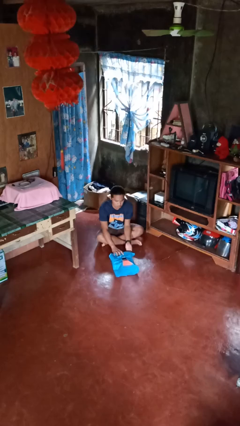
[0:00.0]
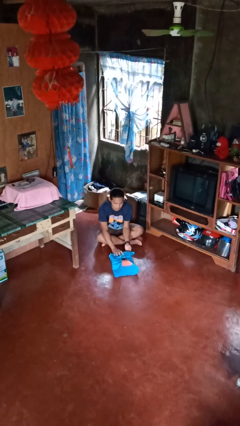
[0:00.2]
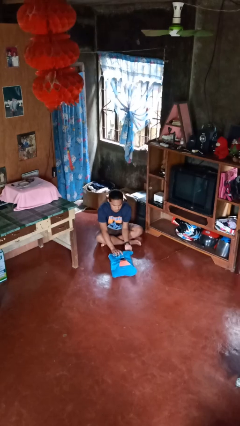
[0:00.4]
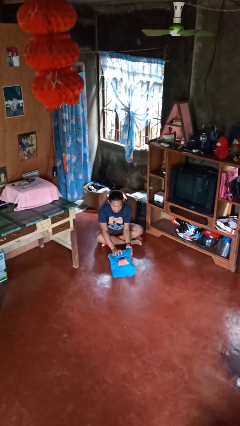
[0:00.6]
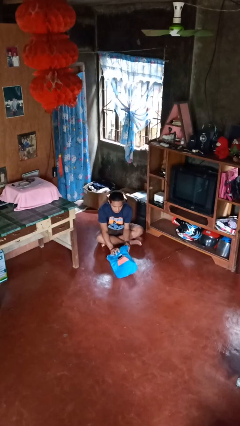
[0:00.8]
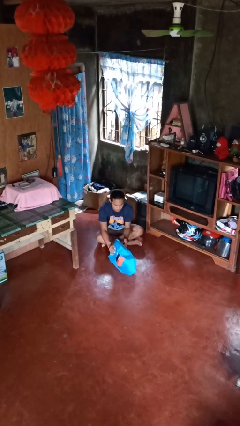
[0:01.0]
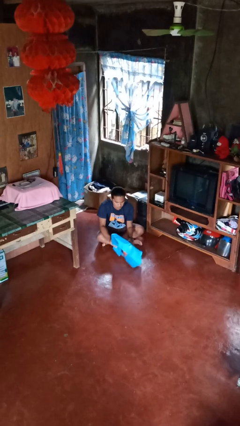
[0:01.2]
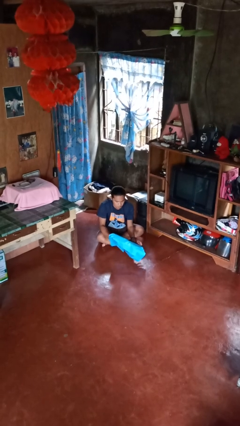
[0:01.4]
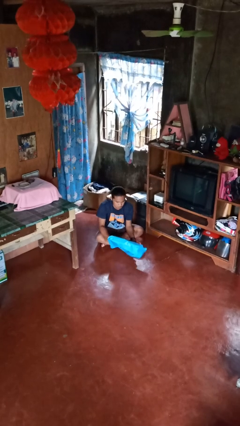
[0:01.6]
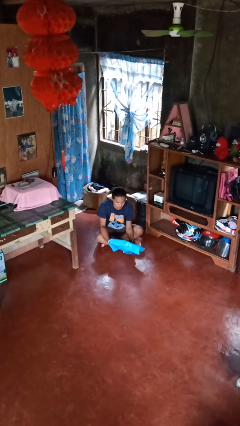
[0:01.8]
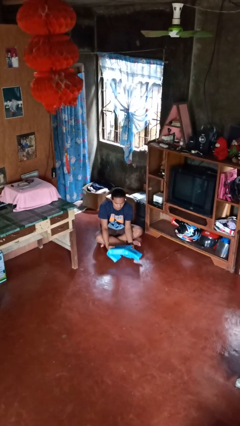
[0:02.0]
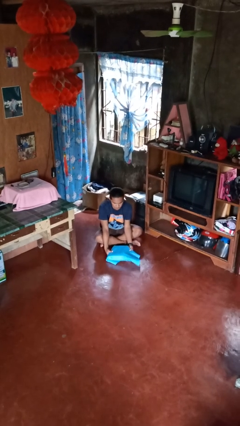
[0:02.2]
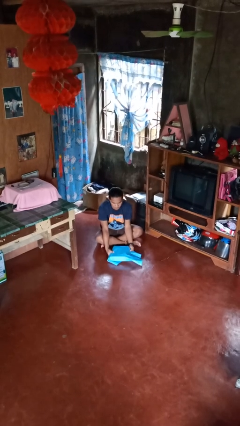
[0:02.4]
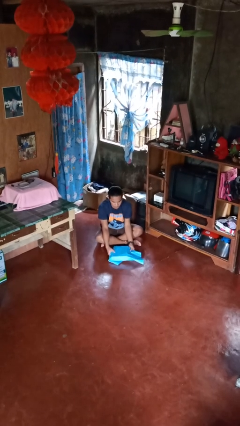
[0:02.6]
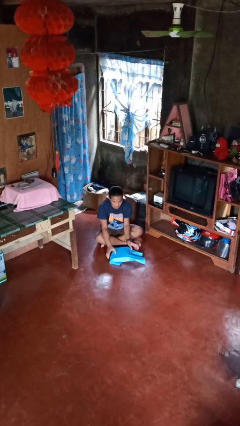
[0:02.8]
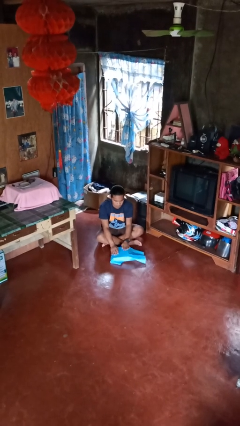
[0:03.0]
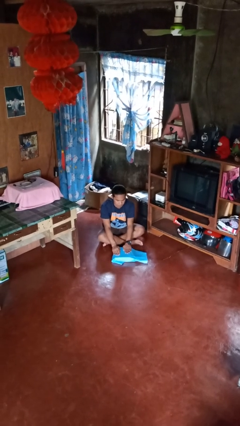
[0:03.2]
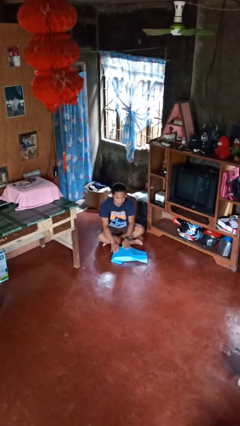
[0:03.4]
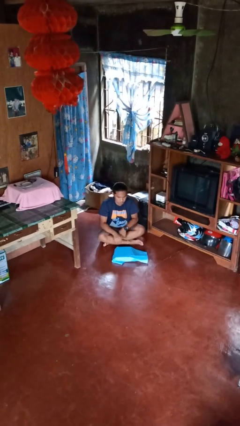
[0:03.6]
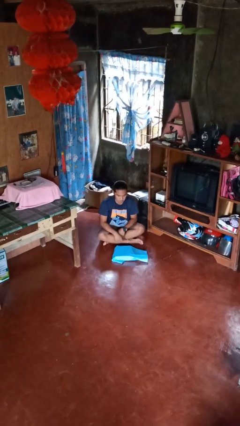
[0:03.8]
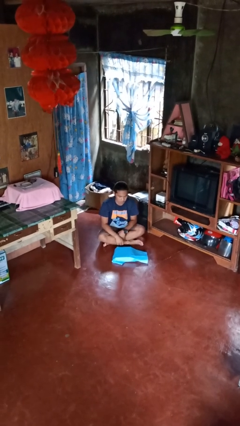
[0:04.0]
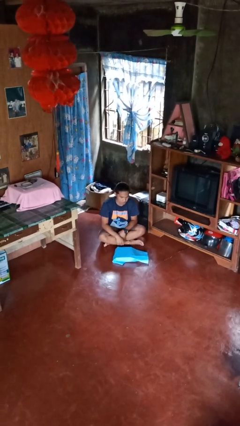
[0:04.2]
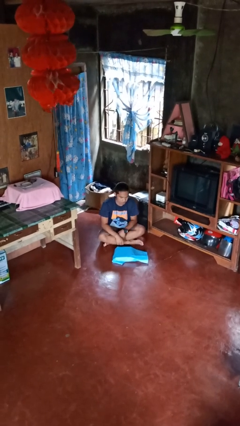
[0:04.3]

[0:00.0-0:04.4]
person wraps box

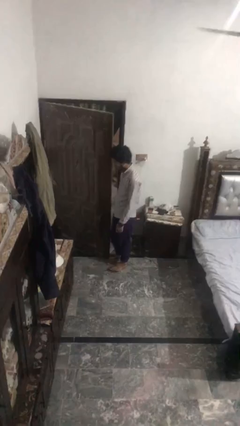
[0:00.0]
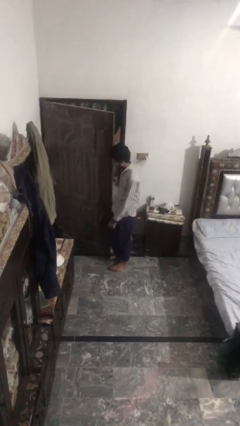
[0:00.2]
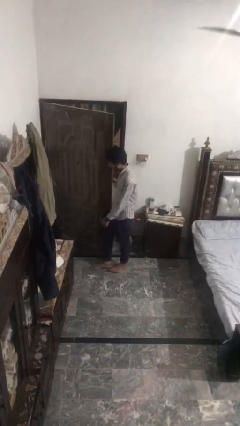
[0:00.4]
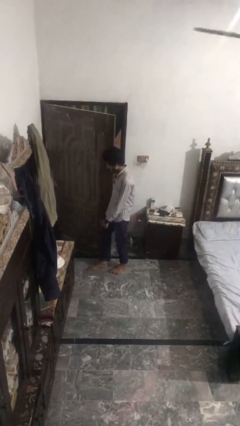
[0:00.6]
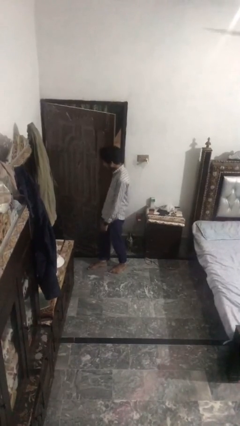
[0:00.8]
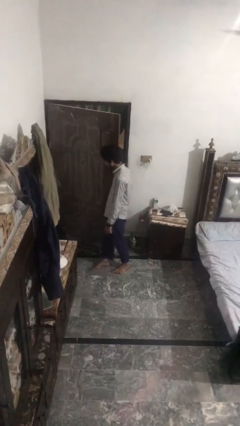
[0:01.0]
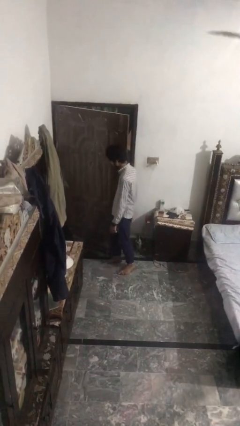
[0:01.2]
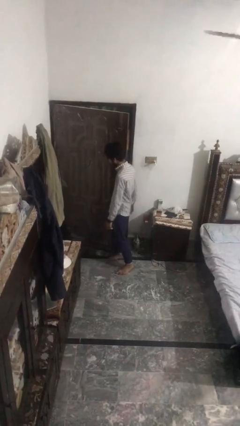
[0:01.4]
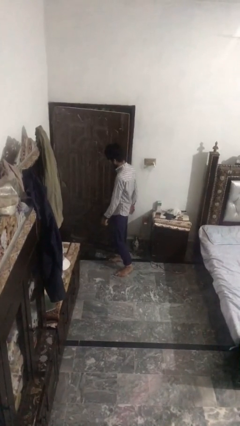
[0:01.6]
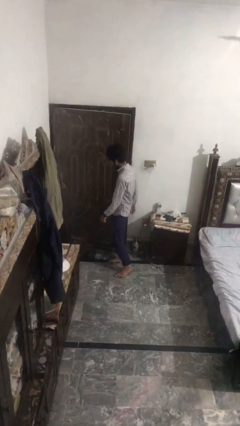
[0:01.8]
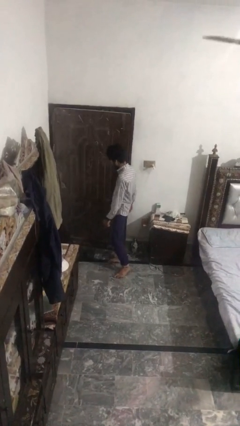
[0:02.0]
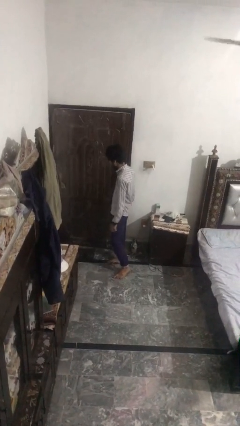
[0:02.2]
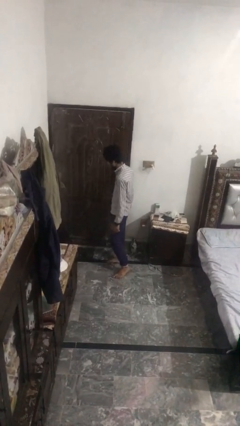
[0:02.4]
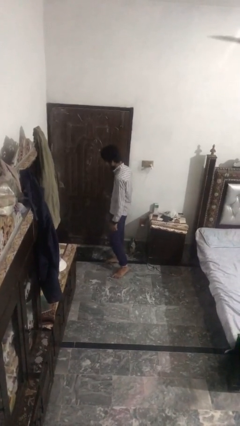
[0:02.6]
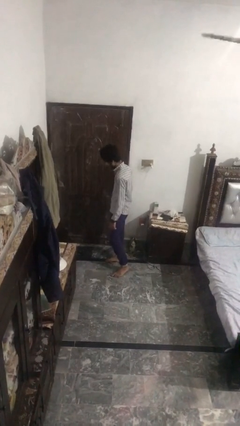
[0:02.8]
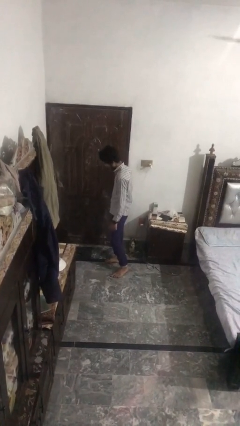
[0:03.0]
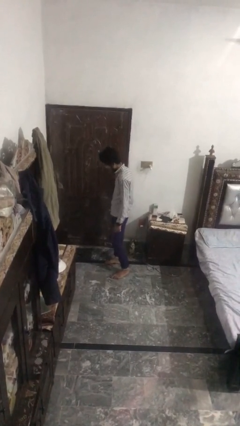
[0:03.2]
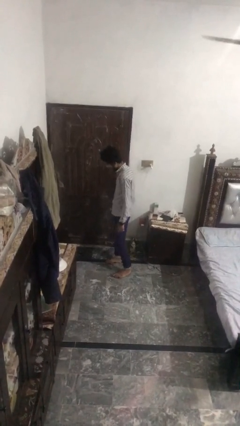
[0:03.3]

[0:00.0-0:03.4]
person closes door with hip

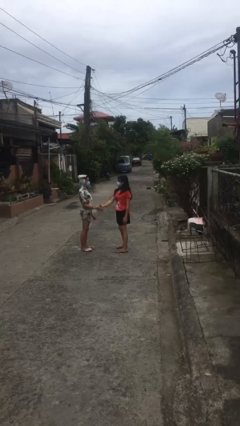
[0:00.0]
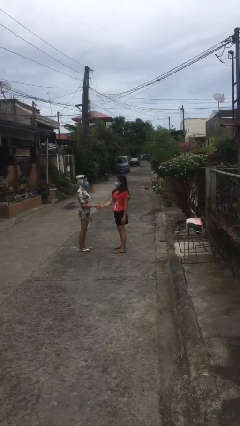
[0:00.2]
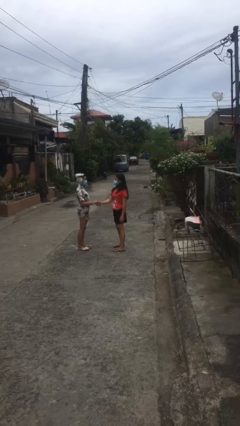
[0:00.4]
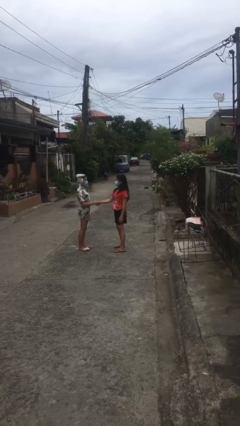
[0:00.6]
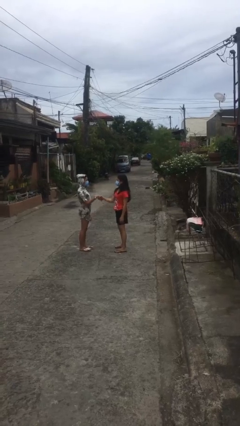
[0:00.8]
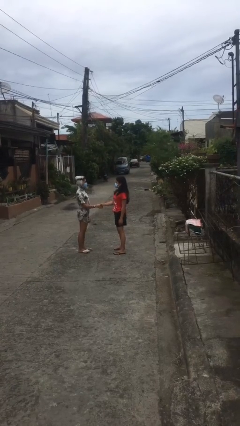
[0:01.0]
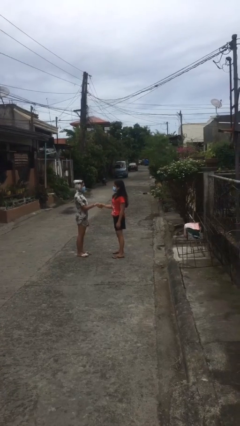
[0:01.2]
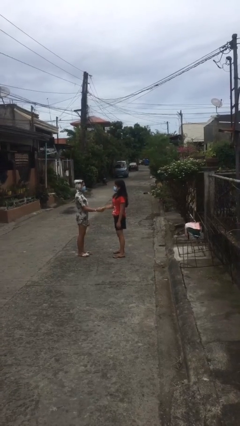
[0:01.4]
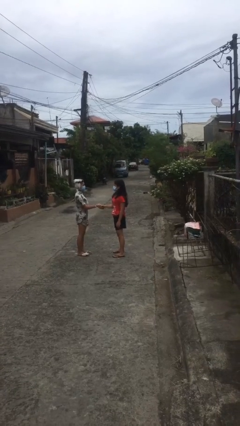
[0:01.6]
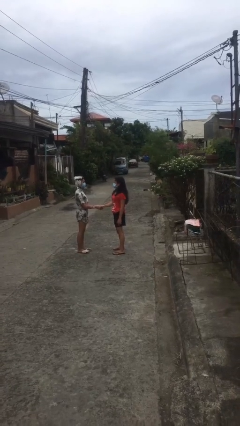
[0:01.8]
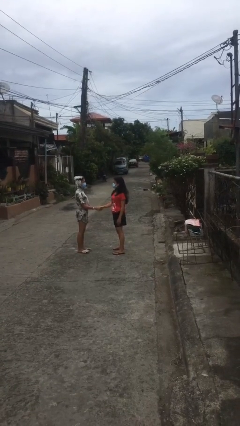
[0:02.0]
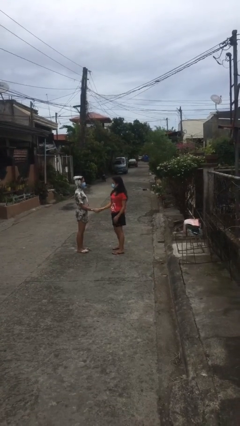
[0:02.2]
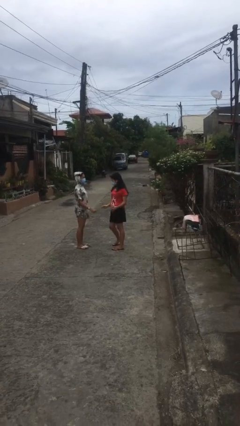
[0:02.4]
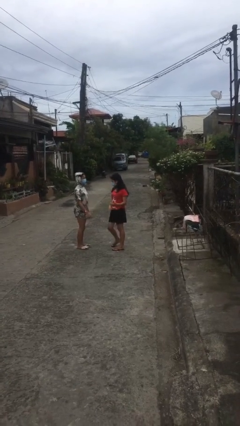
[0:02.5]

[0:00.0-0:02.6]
person shakes hand

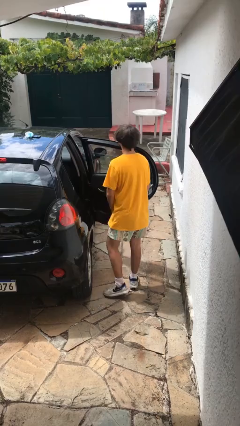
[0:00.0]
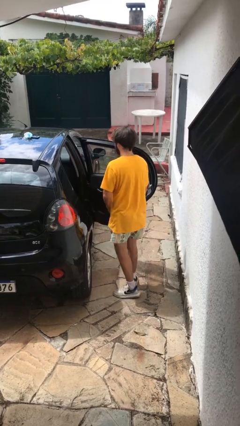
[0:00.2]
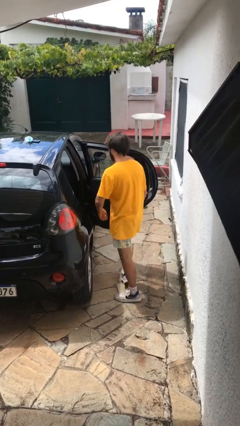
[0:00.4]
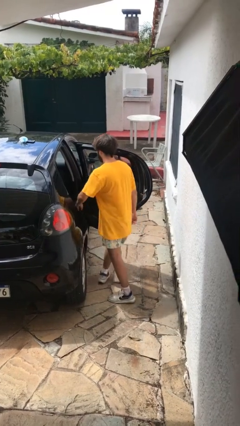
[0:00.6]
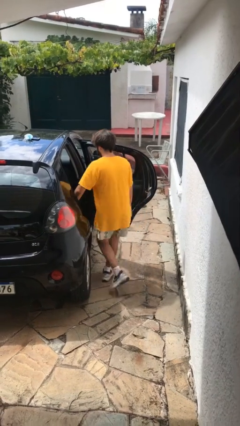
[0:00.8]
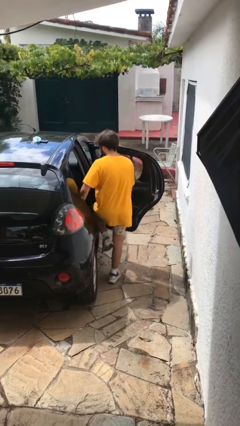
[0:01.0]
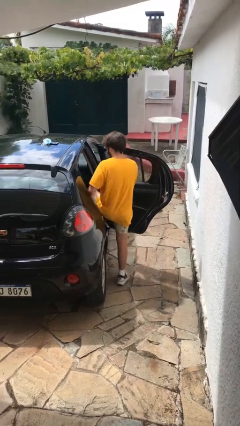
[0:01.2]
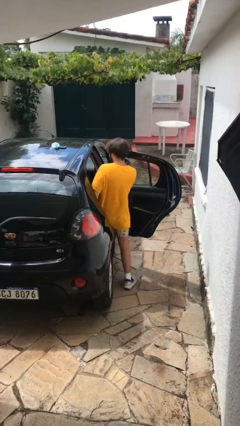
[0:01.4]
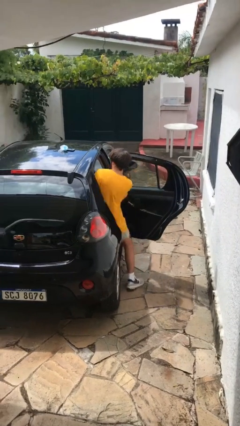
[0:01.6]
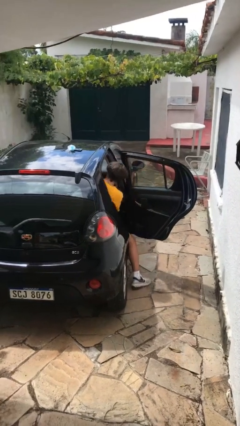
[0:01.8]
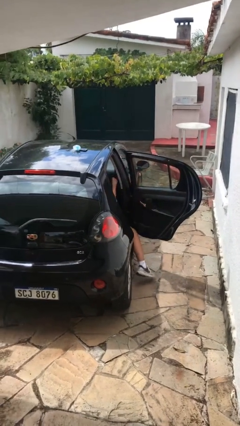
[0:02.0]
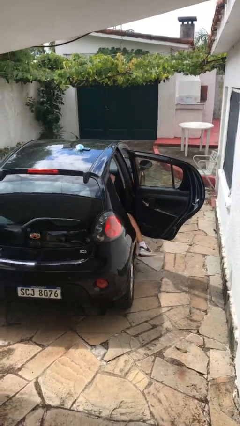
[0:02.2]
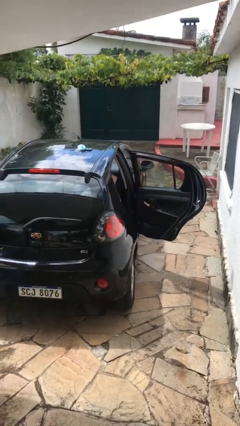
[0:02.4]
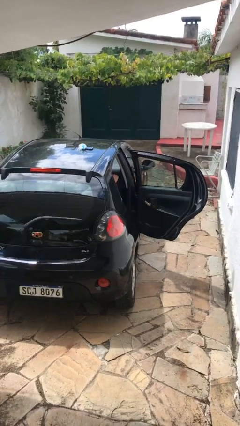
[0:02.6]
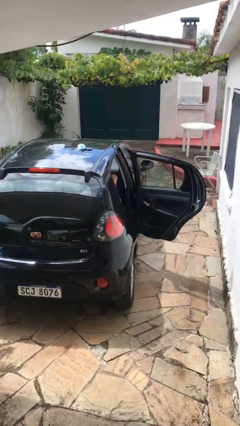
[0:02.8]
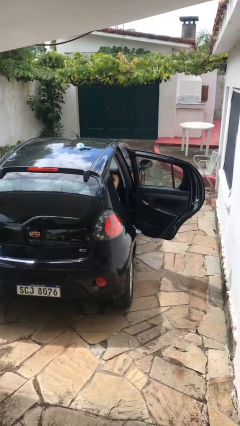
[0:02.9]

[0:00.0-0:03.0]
person enters car

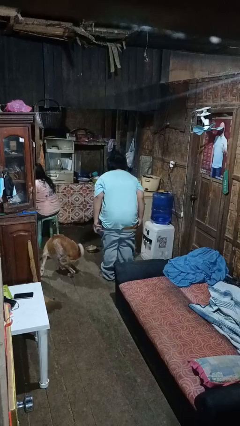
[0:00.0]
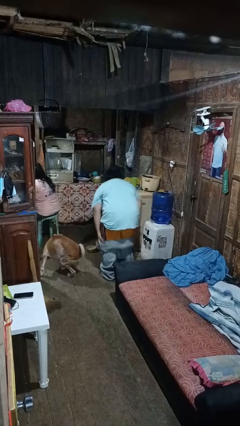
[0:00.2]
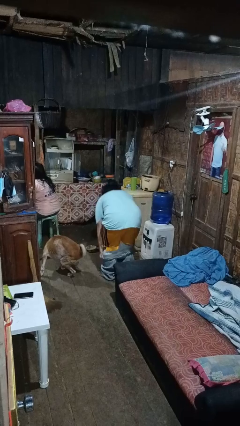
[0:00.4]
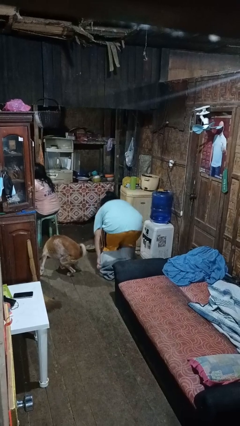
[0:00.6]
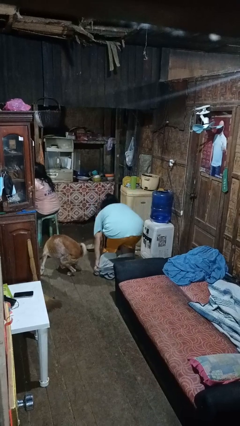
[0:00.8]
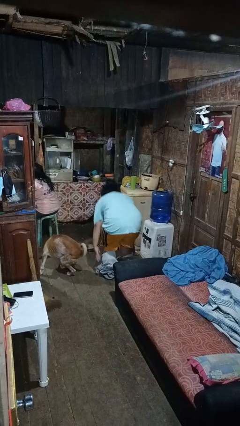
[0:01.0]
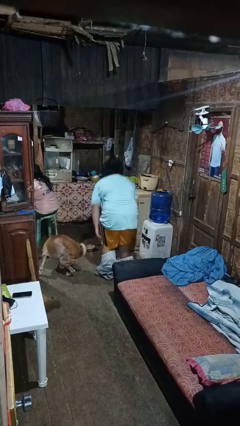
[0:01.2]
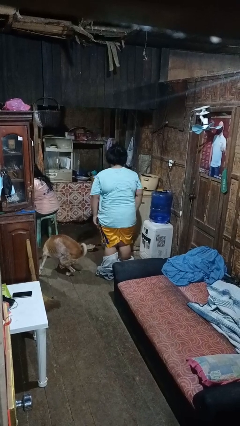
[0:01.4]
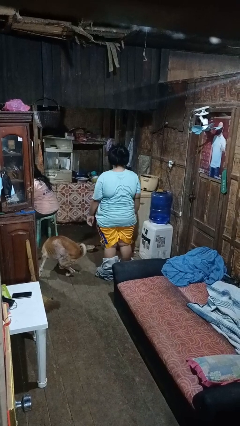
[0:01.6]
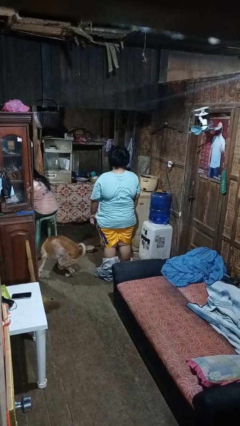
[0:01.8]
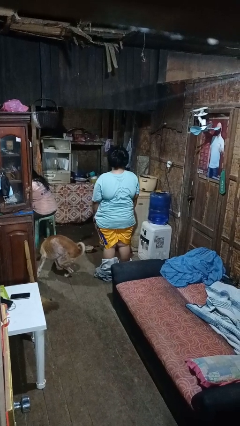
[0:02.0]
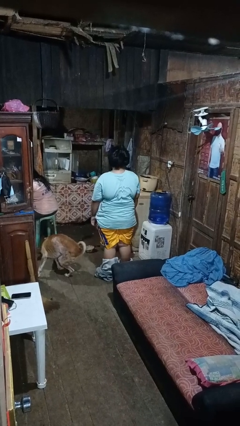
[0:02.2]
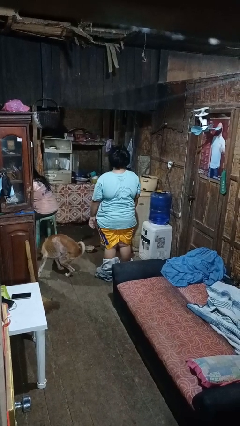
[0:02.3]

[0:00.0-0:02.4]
person takes off pants

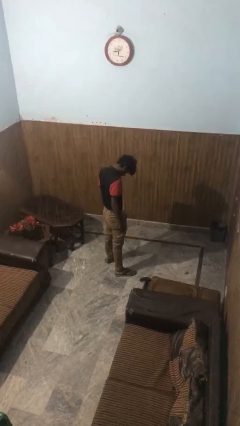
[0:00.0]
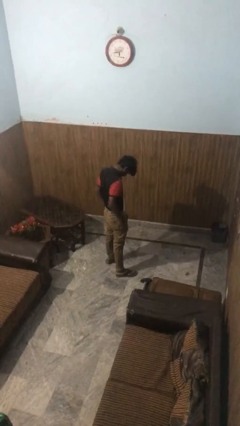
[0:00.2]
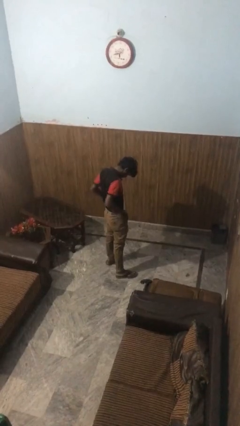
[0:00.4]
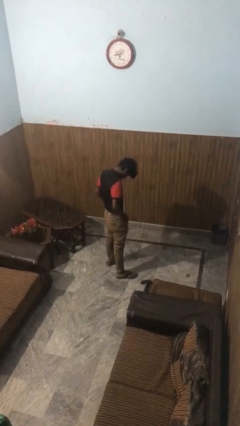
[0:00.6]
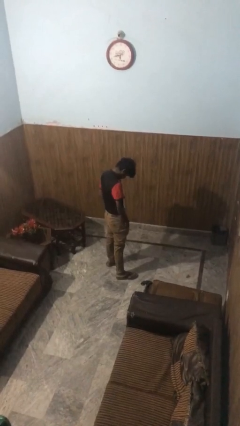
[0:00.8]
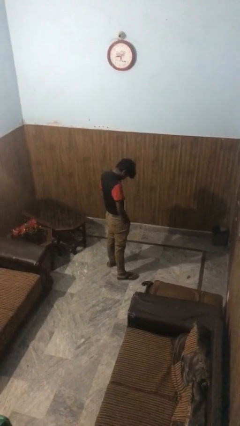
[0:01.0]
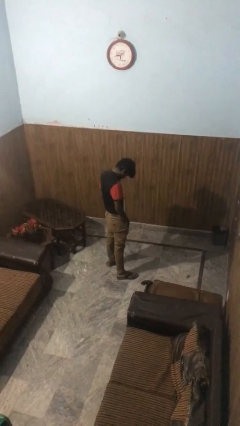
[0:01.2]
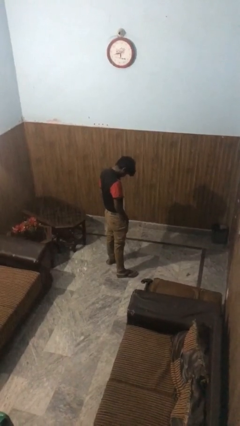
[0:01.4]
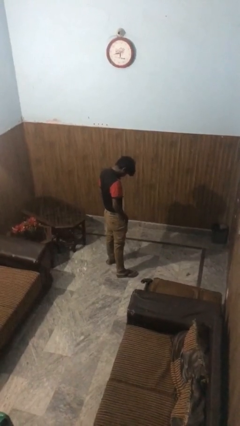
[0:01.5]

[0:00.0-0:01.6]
person puts hands in back pockets
